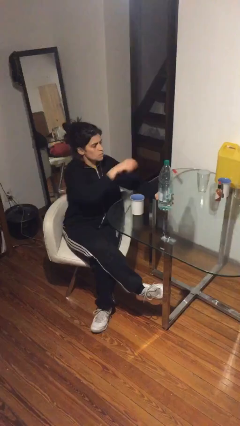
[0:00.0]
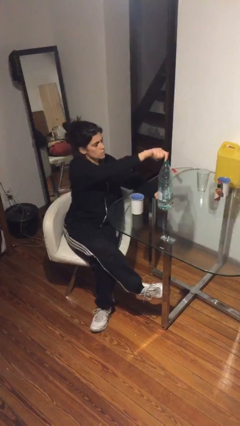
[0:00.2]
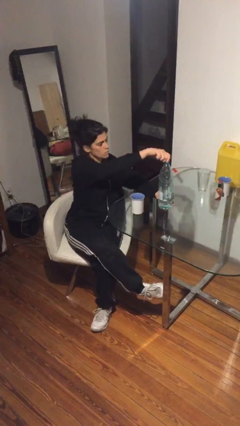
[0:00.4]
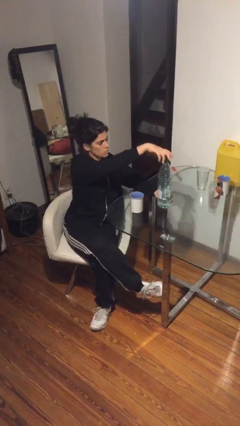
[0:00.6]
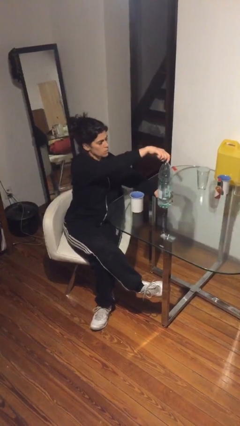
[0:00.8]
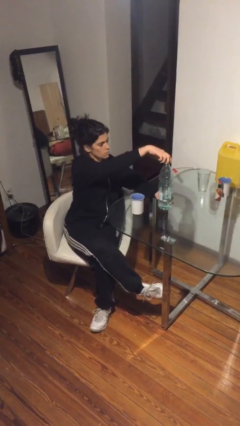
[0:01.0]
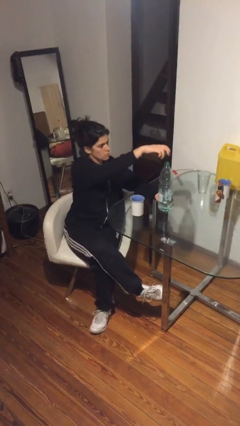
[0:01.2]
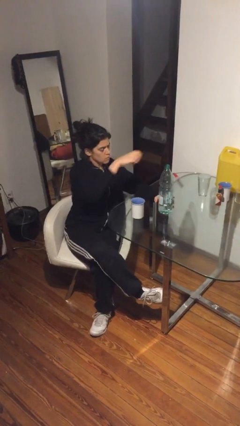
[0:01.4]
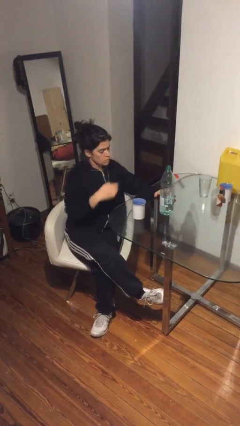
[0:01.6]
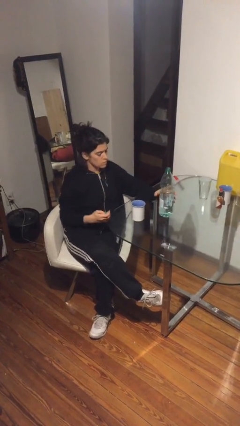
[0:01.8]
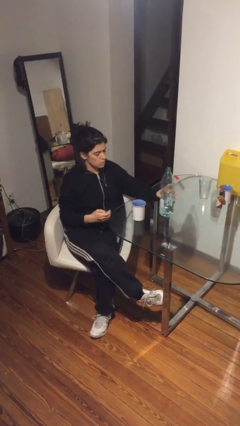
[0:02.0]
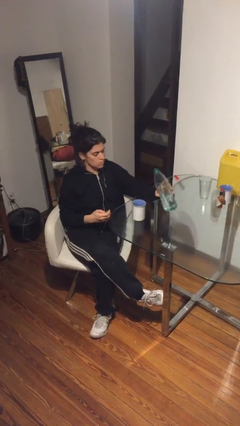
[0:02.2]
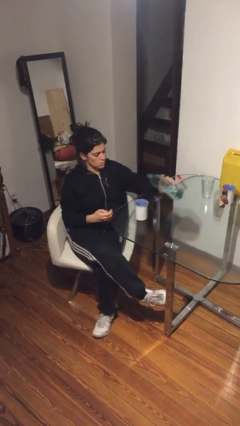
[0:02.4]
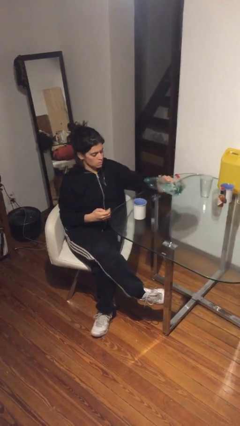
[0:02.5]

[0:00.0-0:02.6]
person unscrews lid from bottle

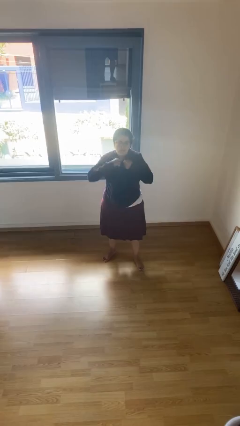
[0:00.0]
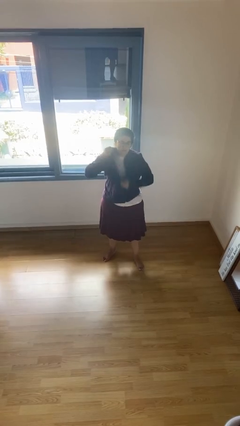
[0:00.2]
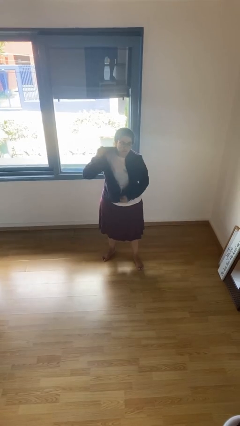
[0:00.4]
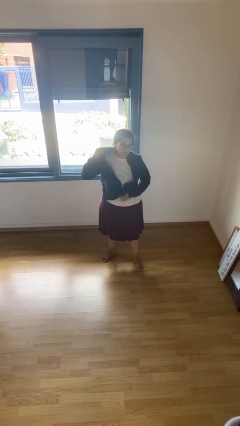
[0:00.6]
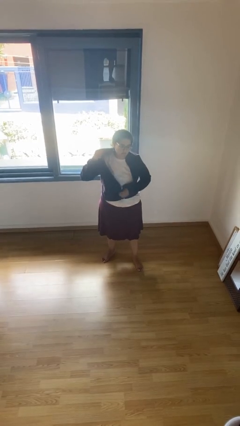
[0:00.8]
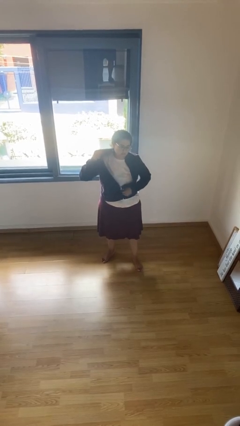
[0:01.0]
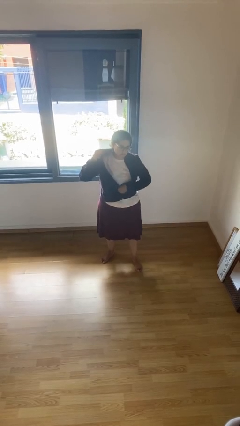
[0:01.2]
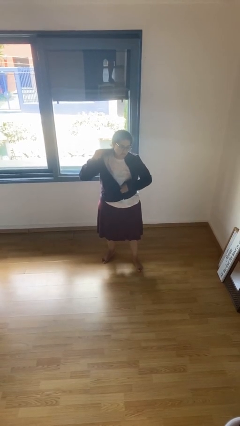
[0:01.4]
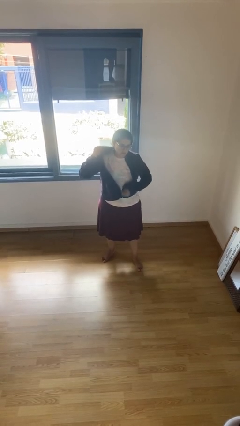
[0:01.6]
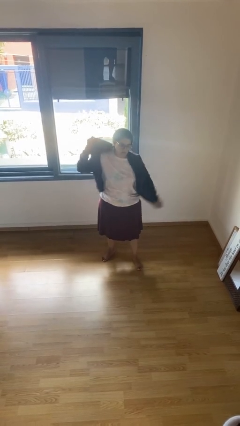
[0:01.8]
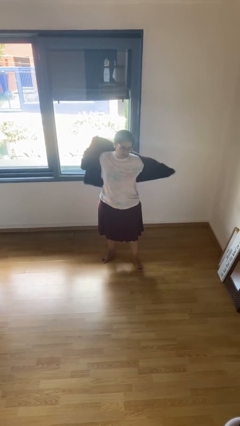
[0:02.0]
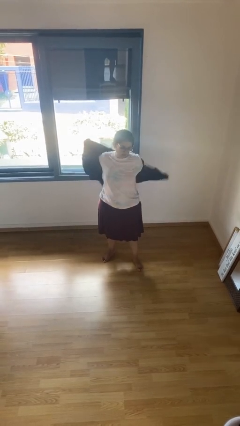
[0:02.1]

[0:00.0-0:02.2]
person unzips jacket

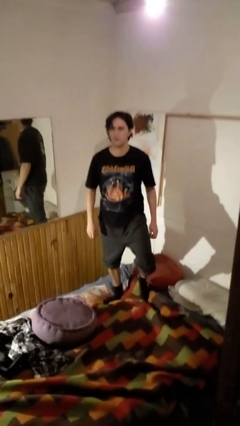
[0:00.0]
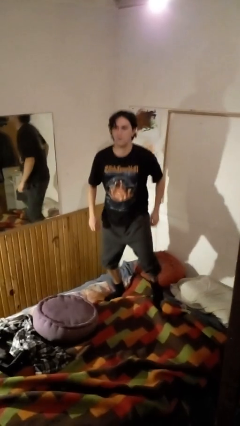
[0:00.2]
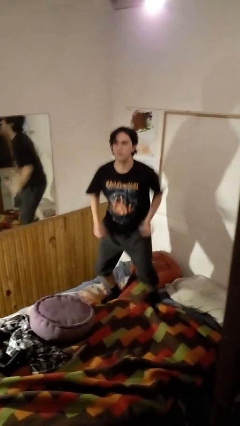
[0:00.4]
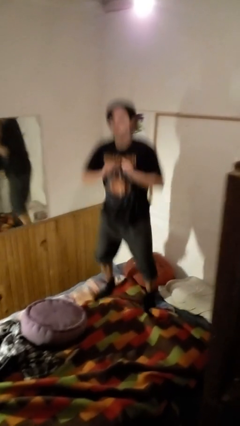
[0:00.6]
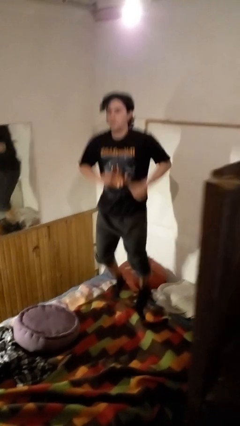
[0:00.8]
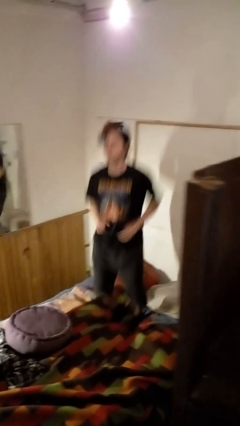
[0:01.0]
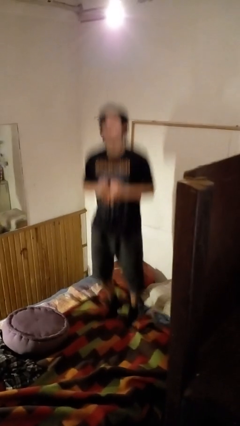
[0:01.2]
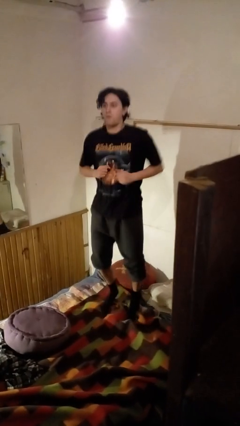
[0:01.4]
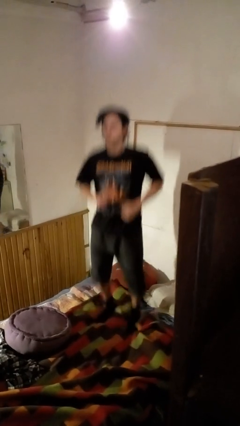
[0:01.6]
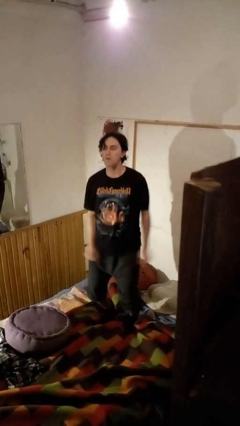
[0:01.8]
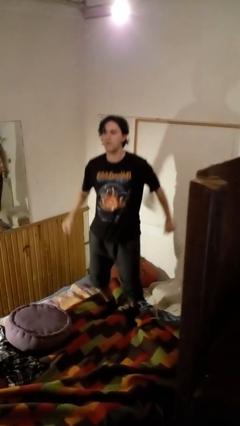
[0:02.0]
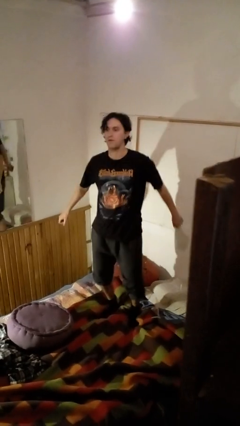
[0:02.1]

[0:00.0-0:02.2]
person jumps on bed

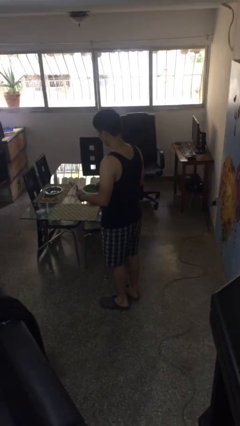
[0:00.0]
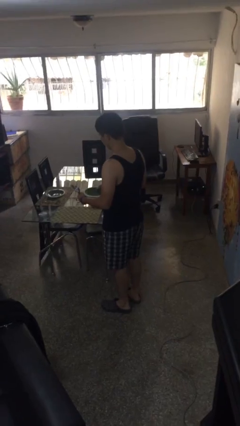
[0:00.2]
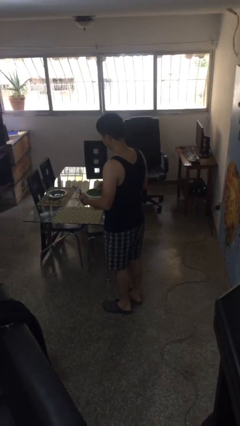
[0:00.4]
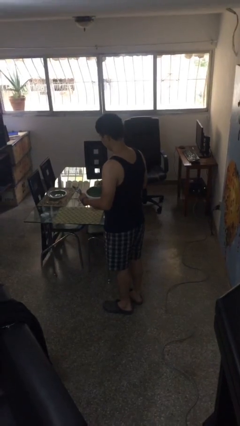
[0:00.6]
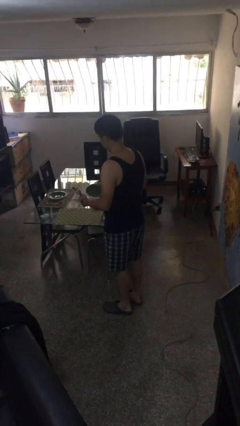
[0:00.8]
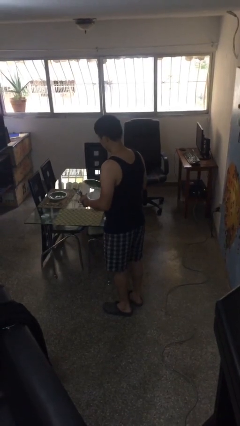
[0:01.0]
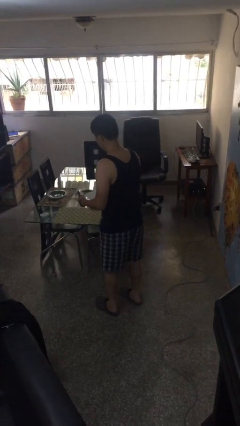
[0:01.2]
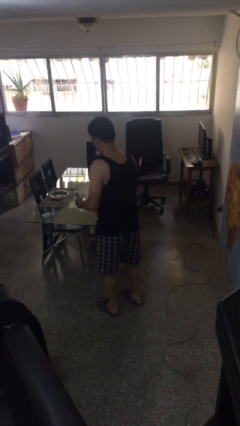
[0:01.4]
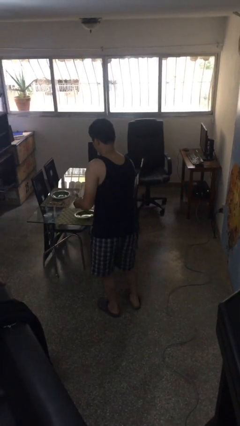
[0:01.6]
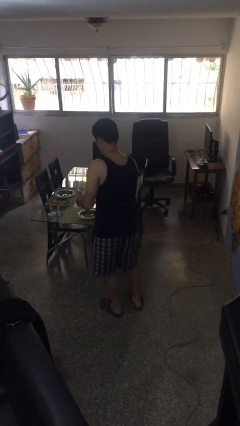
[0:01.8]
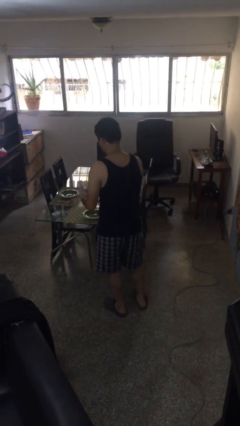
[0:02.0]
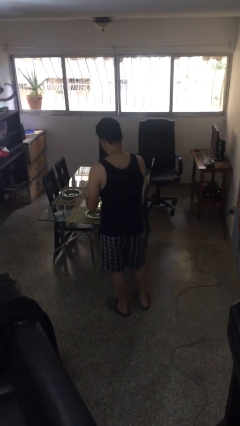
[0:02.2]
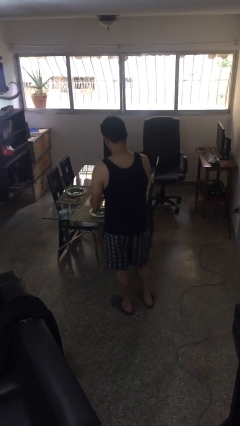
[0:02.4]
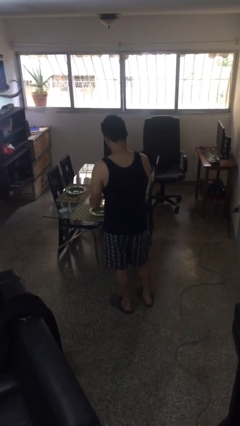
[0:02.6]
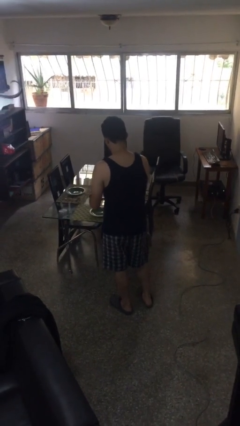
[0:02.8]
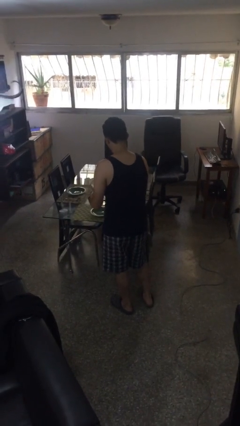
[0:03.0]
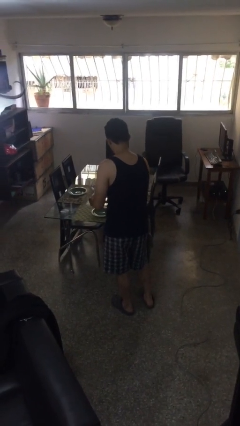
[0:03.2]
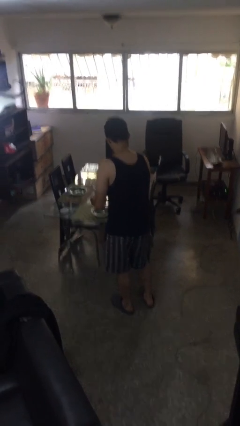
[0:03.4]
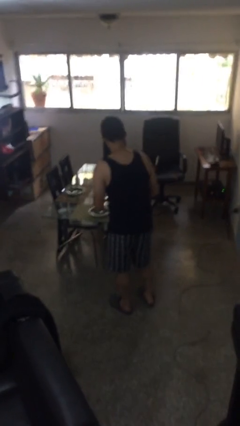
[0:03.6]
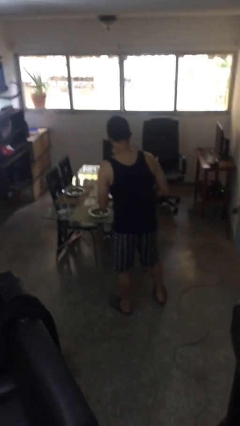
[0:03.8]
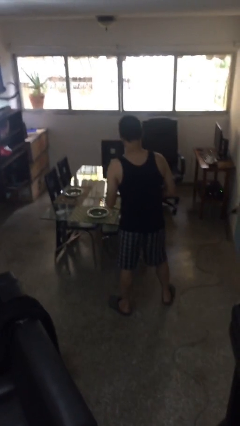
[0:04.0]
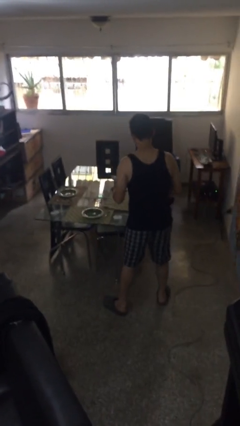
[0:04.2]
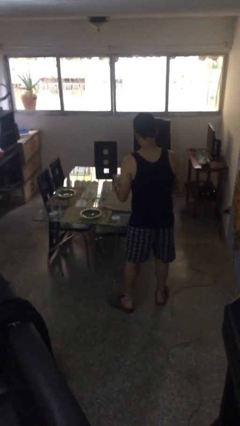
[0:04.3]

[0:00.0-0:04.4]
person sets table

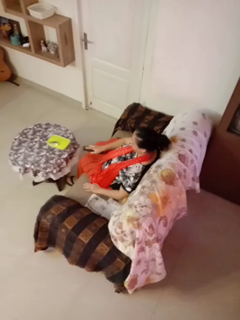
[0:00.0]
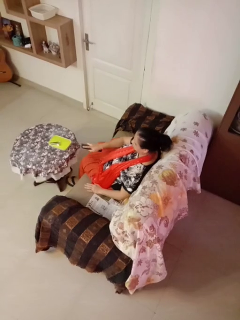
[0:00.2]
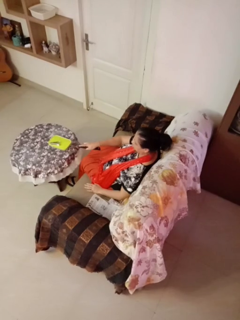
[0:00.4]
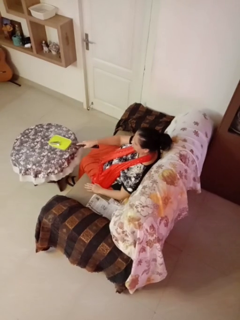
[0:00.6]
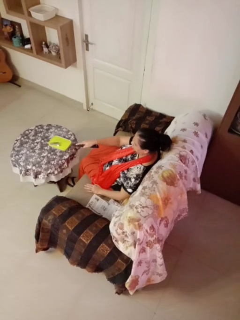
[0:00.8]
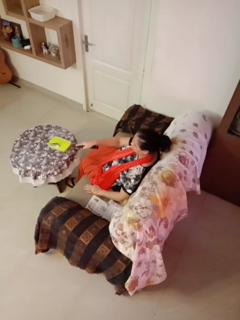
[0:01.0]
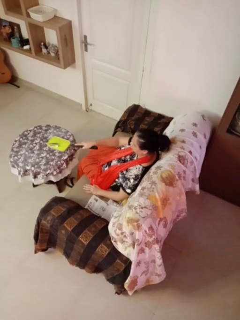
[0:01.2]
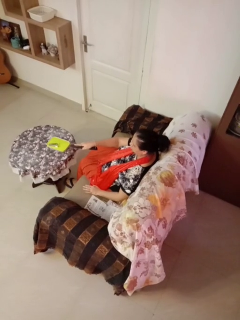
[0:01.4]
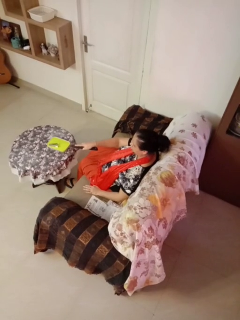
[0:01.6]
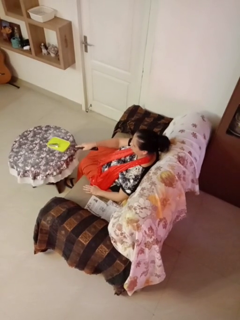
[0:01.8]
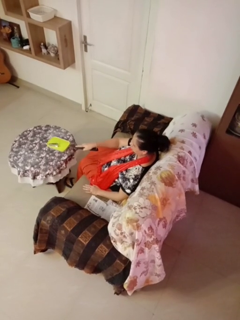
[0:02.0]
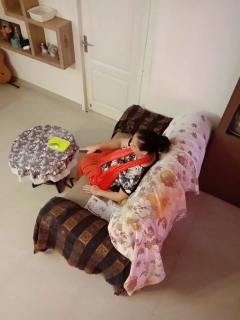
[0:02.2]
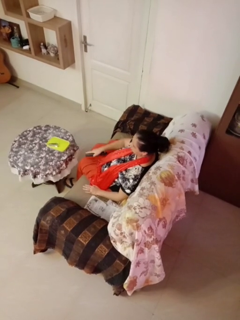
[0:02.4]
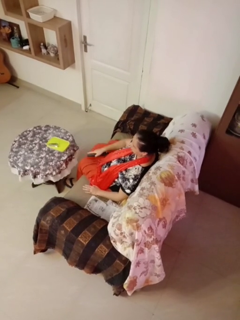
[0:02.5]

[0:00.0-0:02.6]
person uses television remote

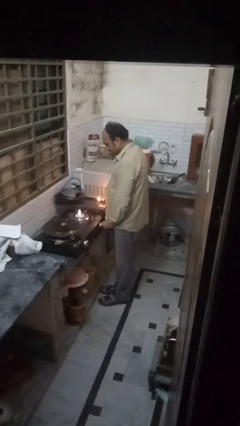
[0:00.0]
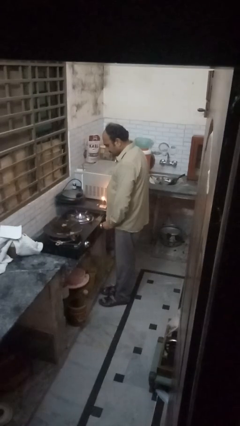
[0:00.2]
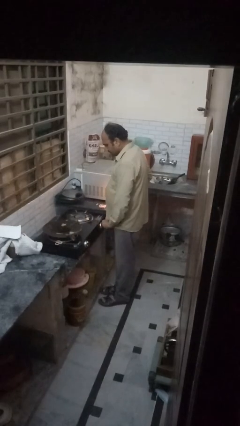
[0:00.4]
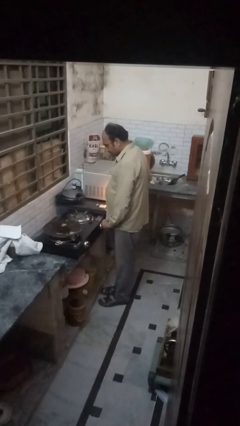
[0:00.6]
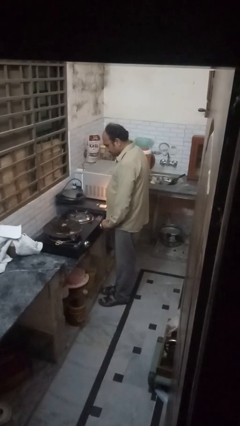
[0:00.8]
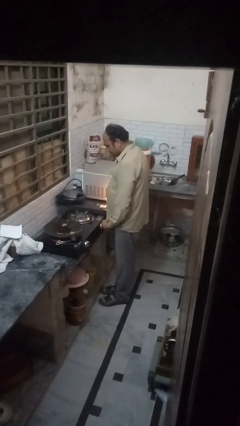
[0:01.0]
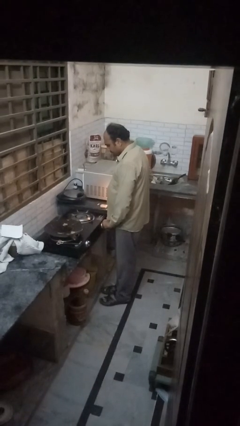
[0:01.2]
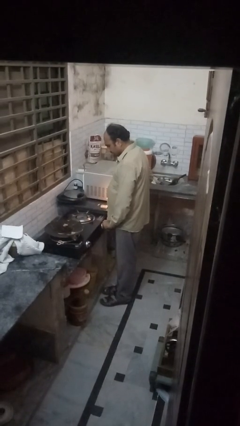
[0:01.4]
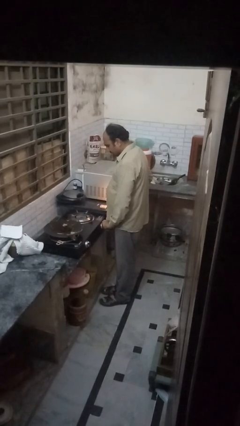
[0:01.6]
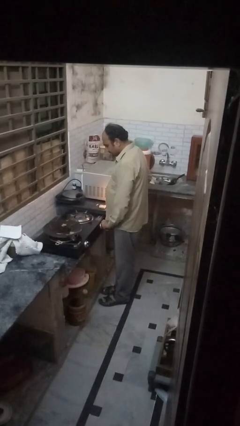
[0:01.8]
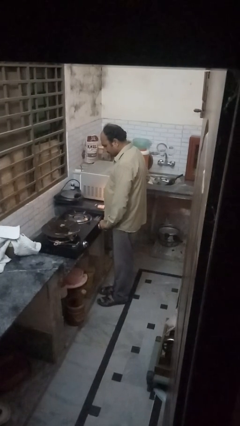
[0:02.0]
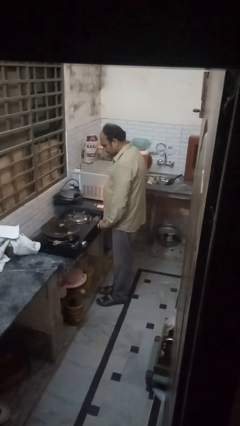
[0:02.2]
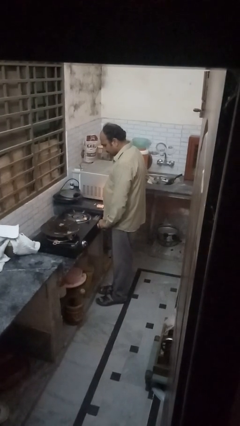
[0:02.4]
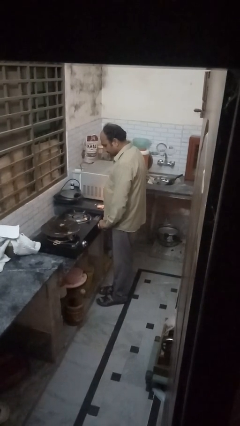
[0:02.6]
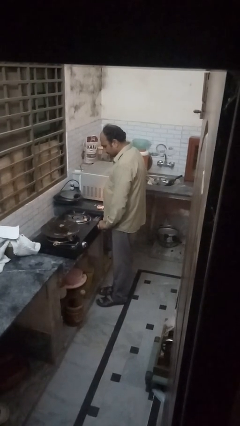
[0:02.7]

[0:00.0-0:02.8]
person turns off stovetop

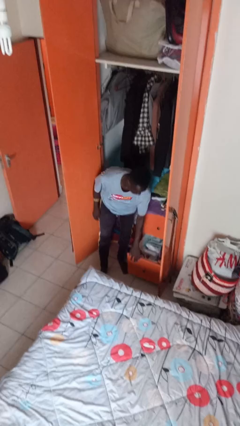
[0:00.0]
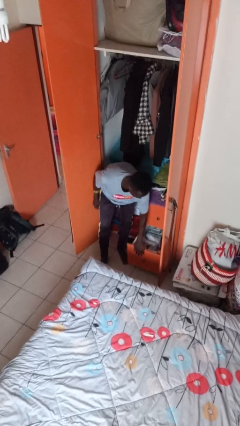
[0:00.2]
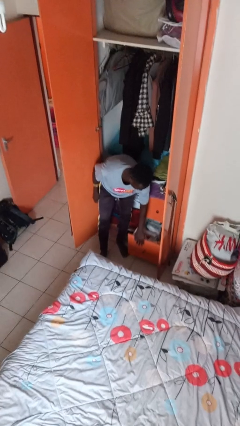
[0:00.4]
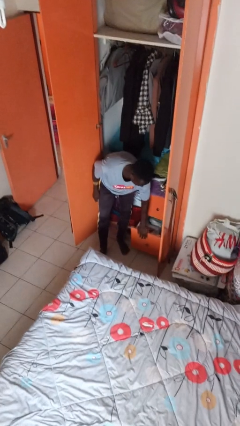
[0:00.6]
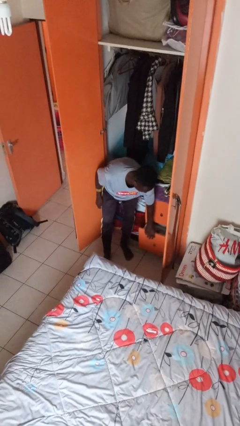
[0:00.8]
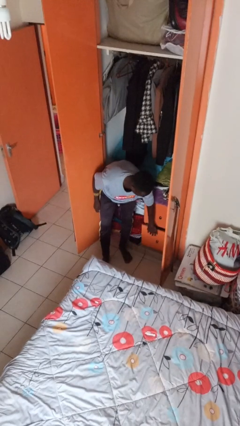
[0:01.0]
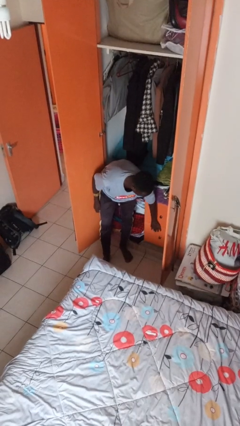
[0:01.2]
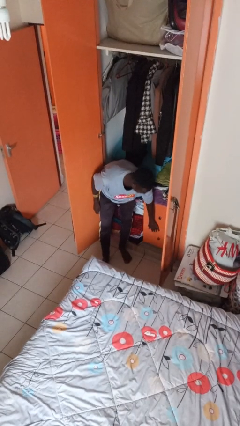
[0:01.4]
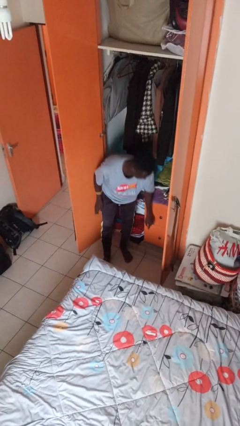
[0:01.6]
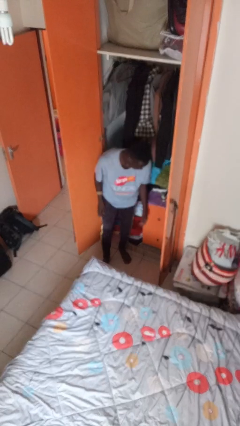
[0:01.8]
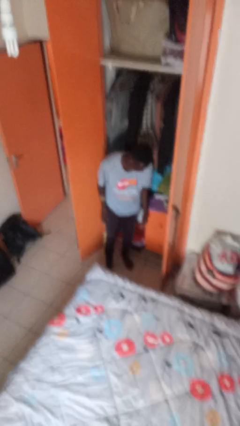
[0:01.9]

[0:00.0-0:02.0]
person closes dresser drawer
